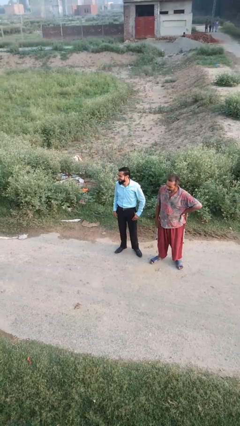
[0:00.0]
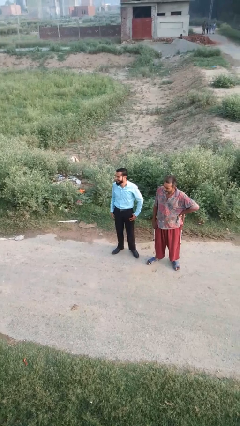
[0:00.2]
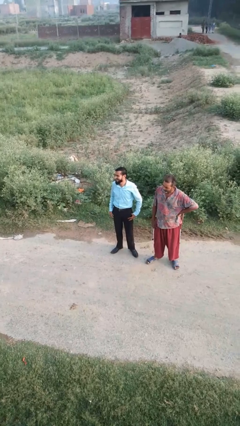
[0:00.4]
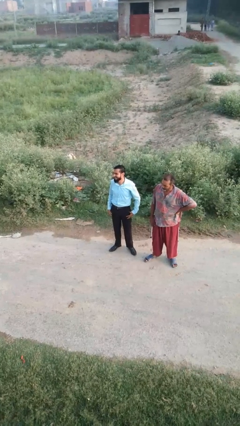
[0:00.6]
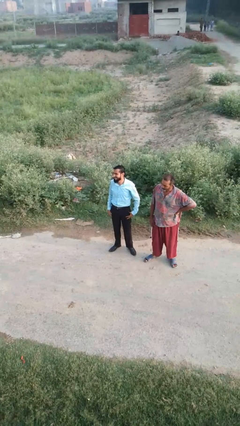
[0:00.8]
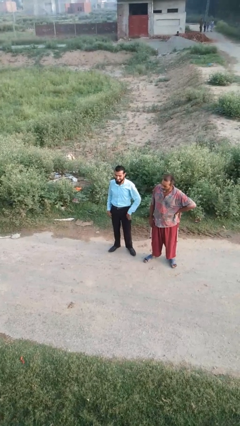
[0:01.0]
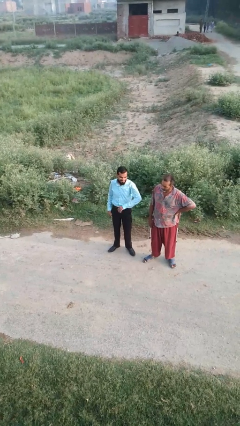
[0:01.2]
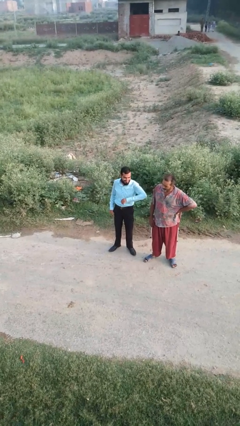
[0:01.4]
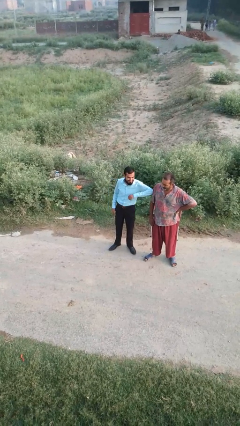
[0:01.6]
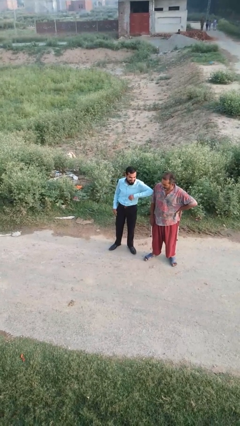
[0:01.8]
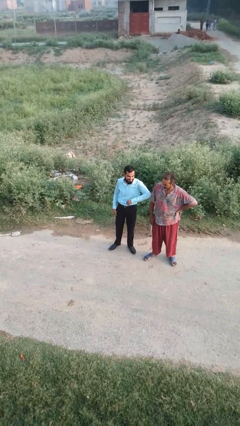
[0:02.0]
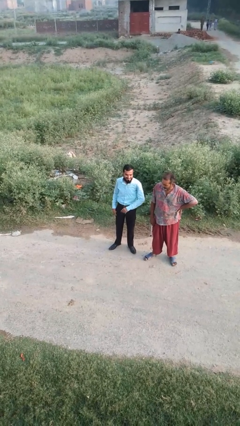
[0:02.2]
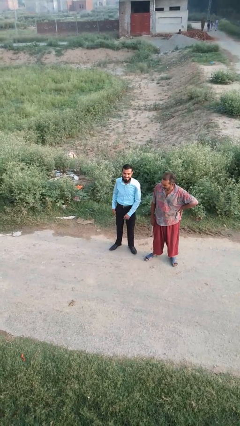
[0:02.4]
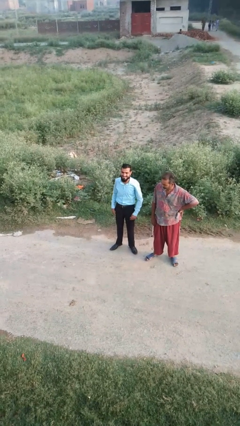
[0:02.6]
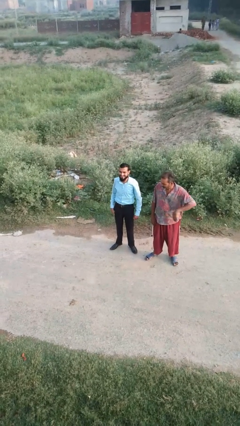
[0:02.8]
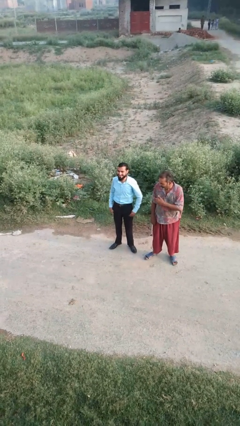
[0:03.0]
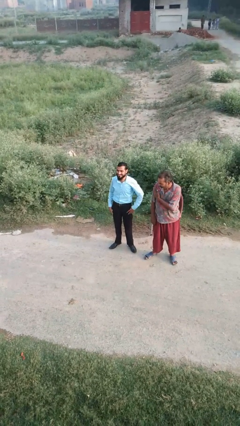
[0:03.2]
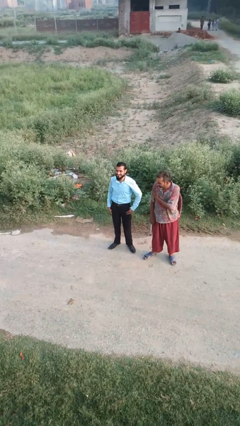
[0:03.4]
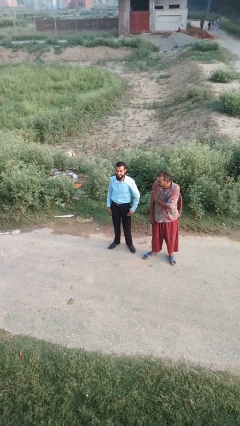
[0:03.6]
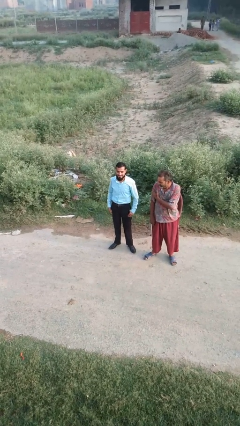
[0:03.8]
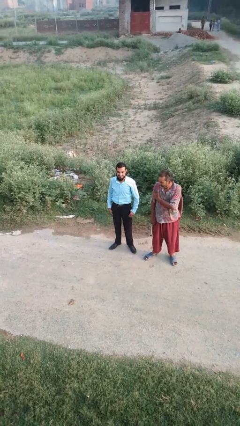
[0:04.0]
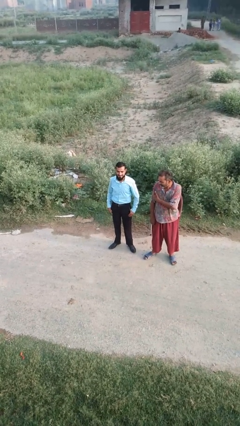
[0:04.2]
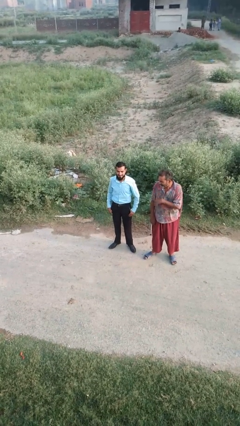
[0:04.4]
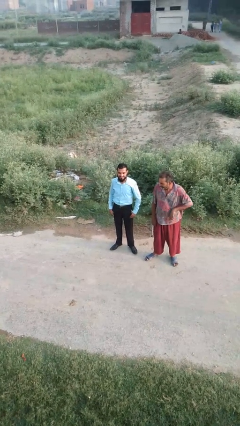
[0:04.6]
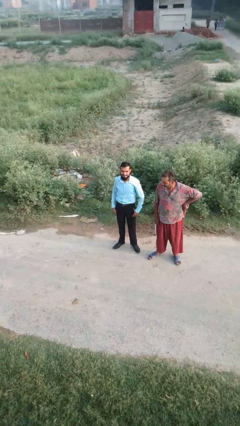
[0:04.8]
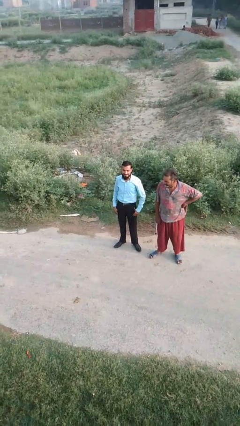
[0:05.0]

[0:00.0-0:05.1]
person nudges person with elbow

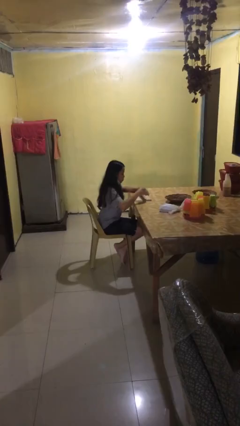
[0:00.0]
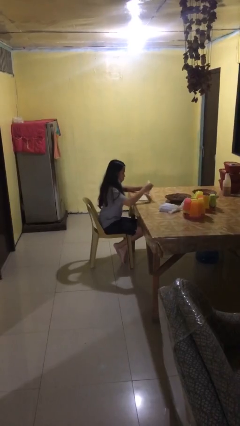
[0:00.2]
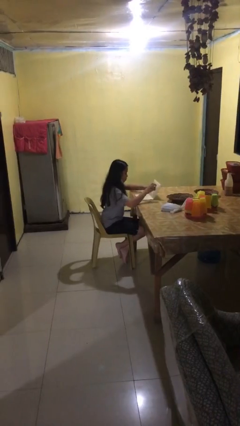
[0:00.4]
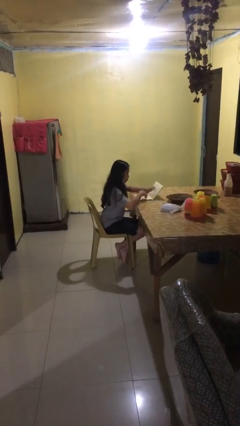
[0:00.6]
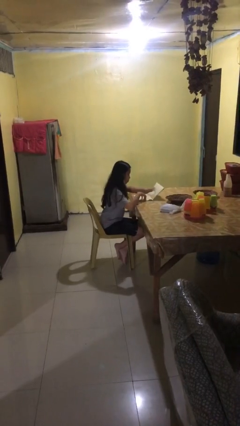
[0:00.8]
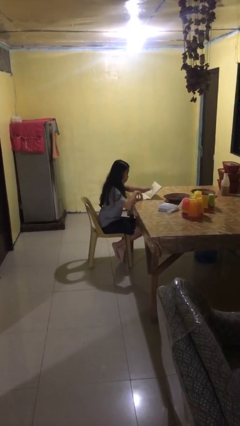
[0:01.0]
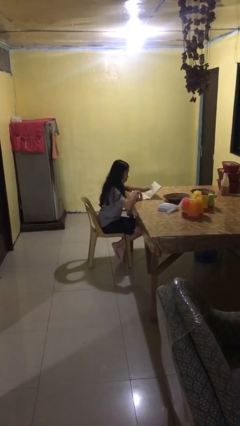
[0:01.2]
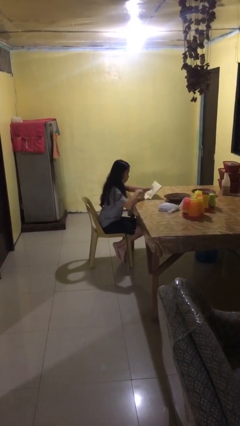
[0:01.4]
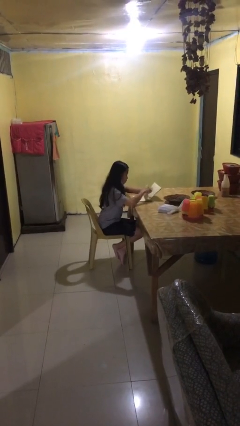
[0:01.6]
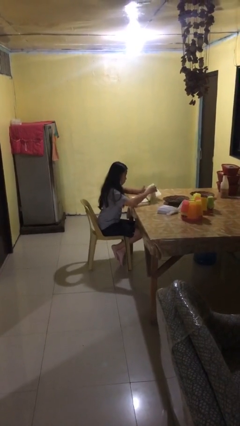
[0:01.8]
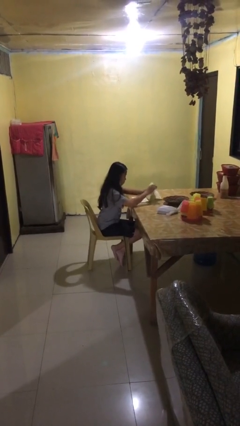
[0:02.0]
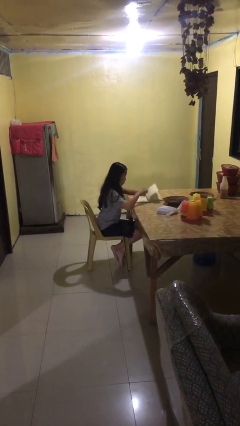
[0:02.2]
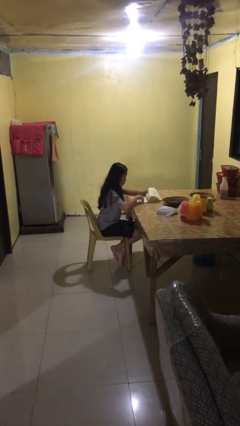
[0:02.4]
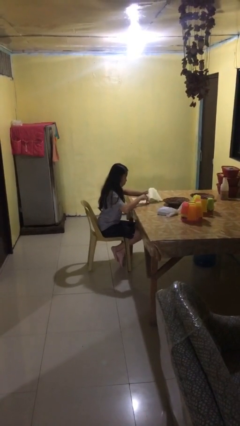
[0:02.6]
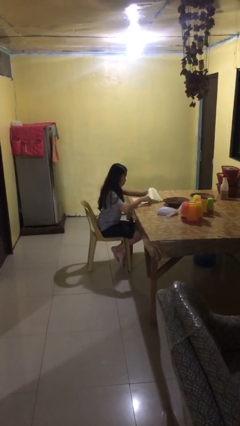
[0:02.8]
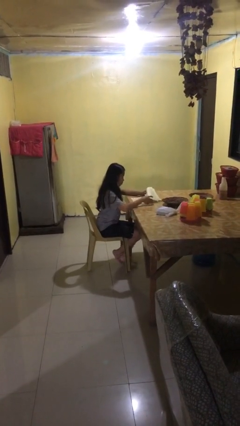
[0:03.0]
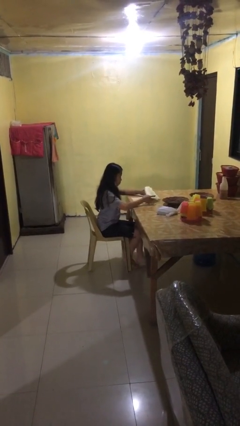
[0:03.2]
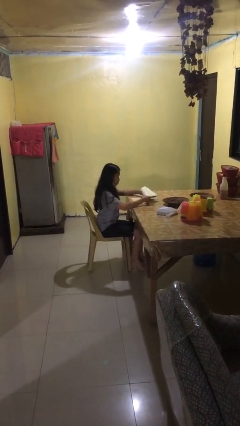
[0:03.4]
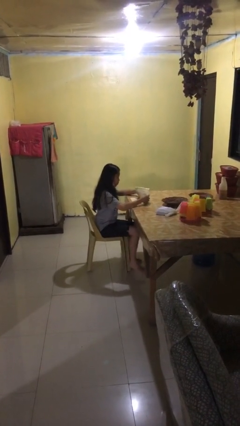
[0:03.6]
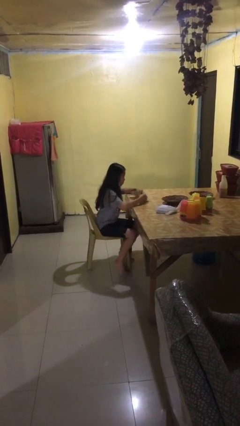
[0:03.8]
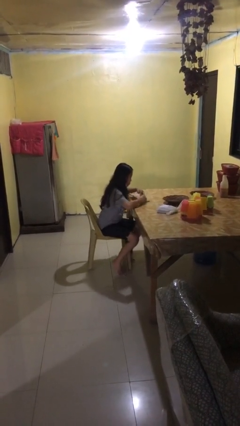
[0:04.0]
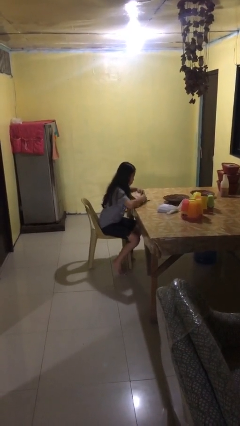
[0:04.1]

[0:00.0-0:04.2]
person reads document

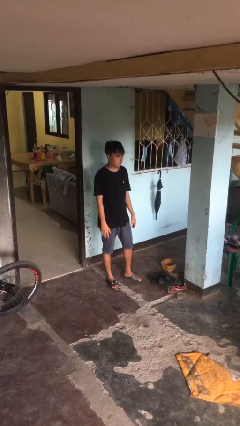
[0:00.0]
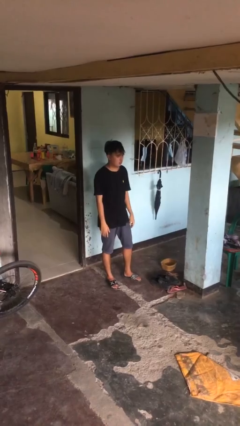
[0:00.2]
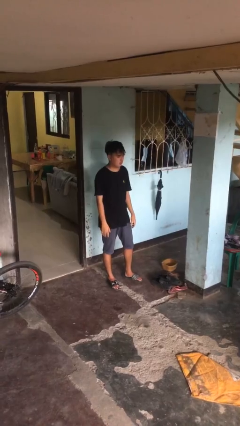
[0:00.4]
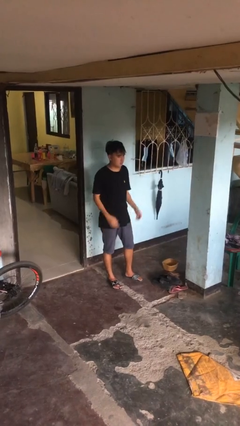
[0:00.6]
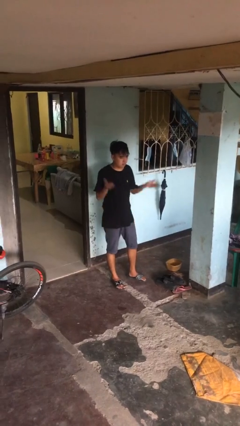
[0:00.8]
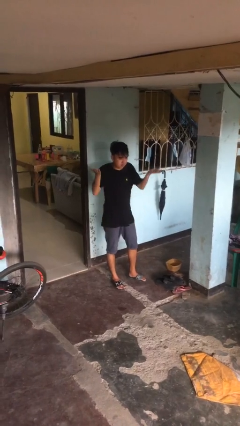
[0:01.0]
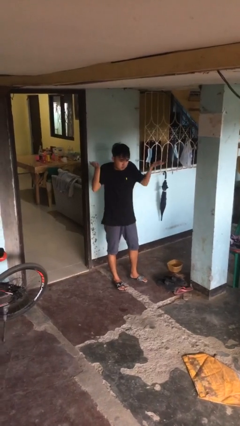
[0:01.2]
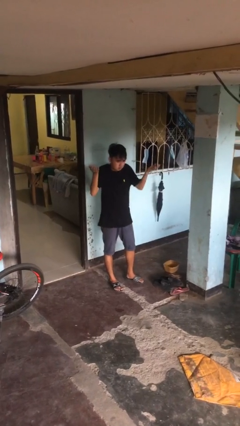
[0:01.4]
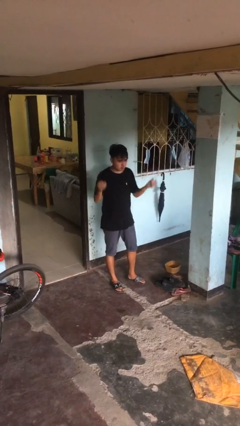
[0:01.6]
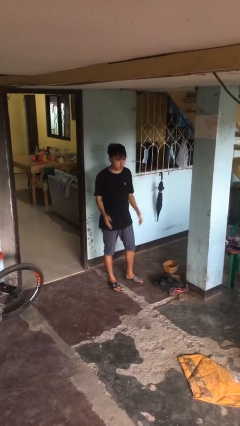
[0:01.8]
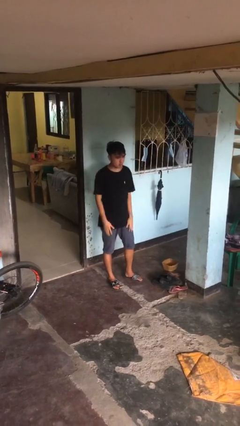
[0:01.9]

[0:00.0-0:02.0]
person shrugs

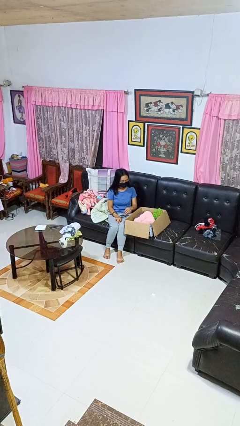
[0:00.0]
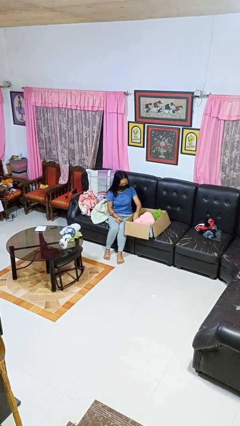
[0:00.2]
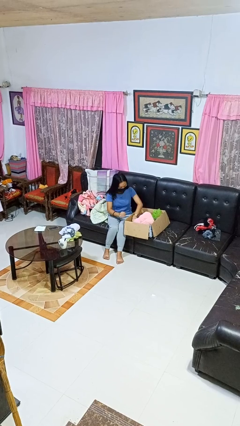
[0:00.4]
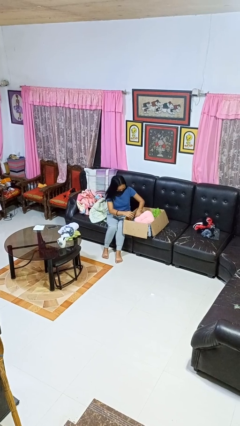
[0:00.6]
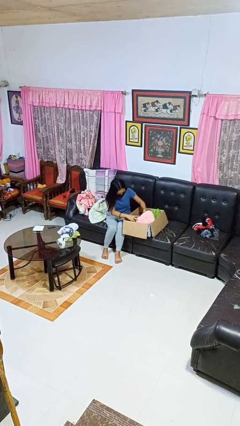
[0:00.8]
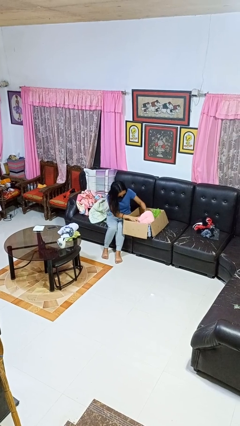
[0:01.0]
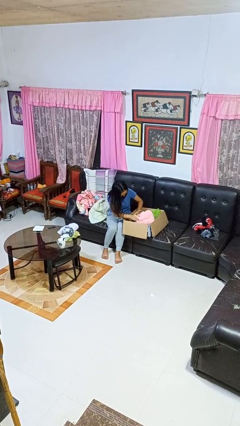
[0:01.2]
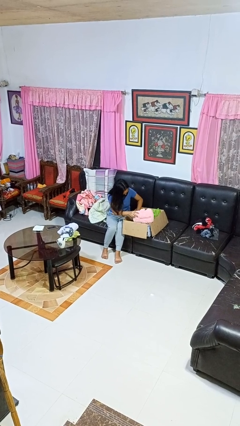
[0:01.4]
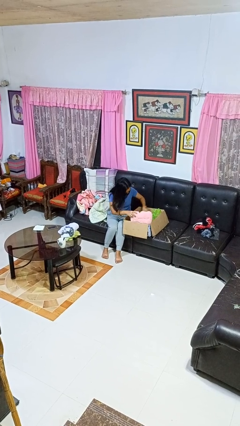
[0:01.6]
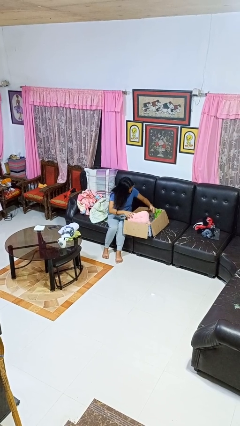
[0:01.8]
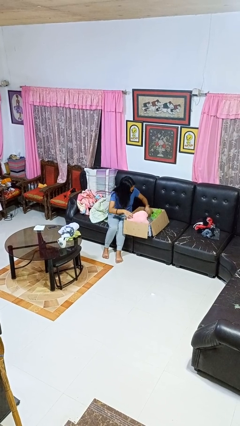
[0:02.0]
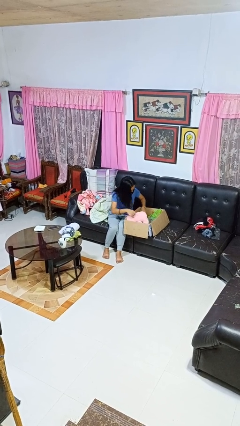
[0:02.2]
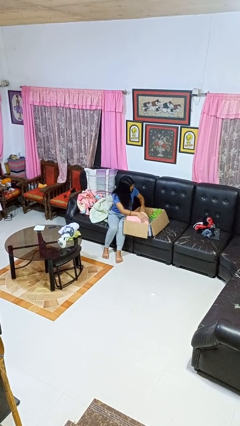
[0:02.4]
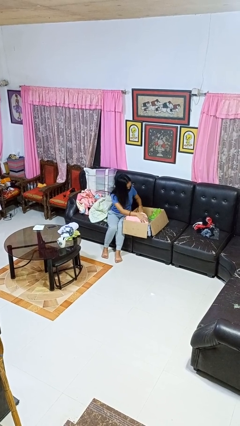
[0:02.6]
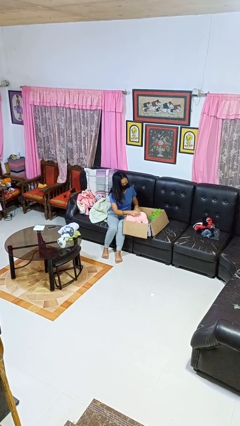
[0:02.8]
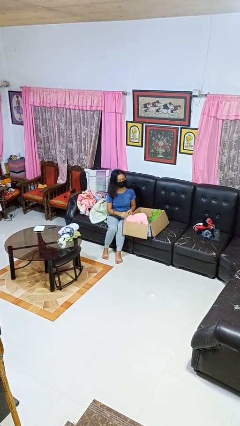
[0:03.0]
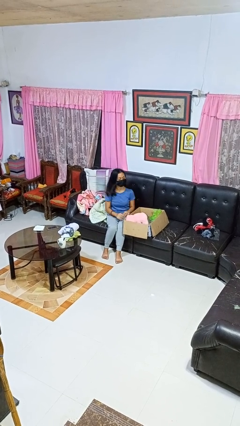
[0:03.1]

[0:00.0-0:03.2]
person searches in box

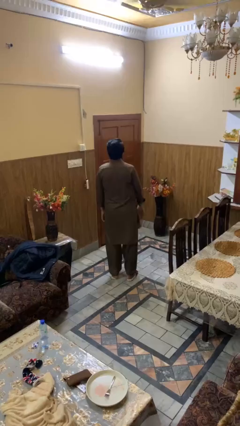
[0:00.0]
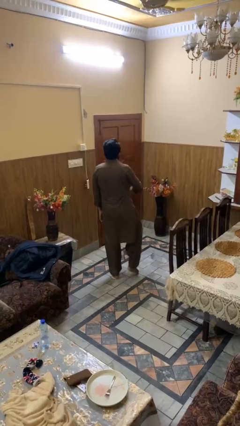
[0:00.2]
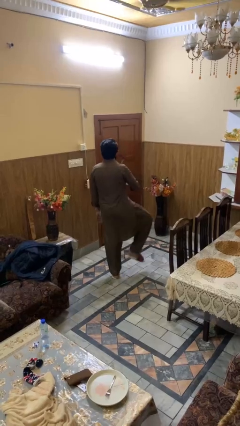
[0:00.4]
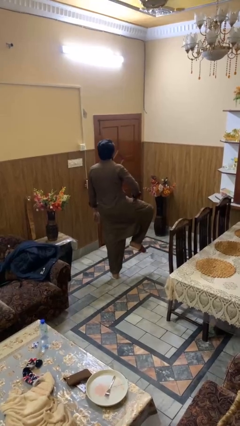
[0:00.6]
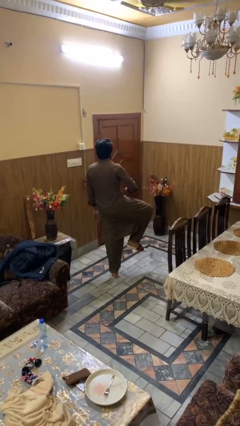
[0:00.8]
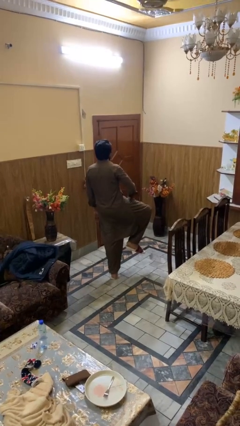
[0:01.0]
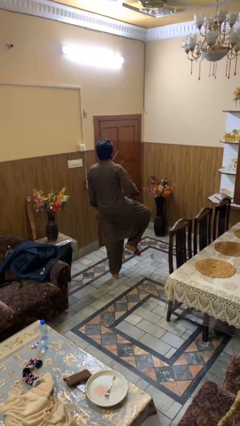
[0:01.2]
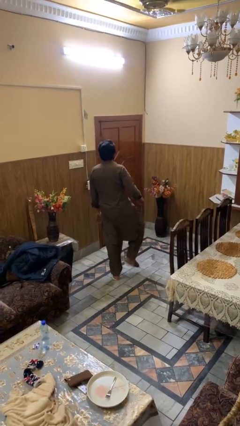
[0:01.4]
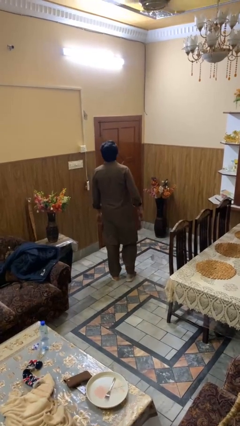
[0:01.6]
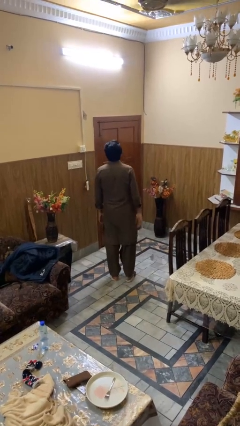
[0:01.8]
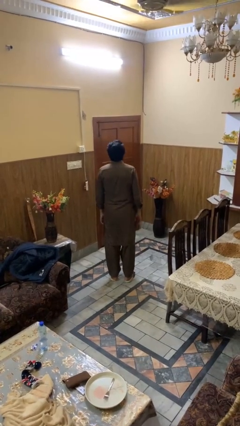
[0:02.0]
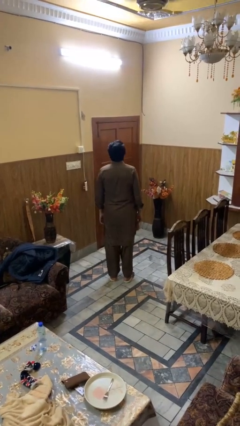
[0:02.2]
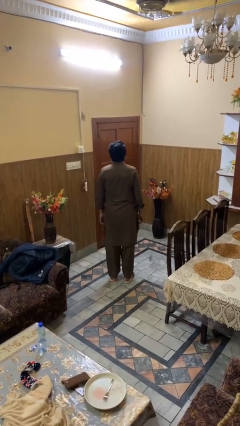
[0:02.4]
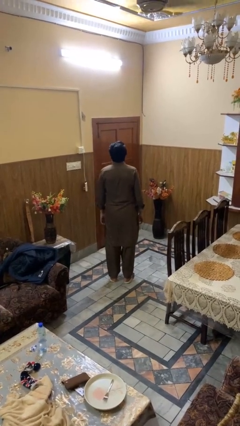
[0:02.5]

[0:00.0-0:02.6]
person slaps hands on thighs

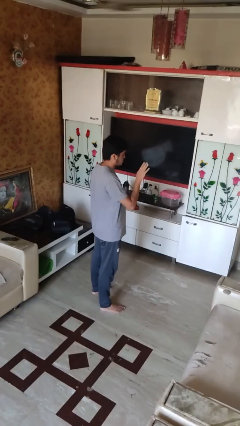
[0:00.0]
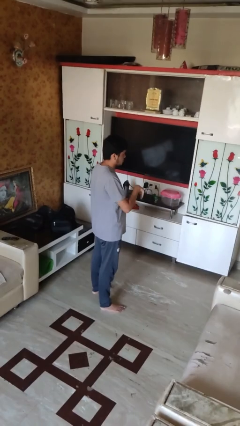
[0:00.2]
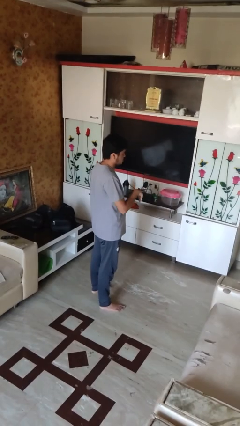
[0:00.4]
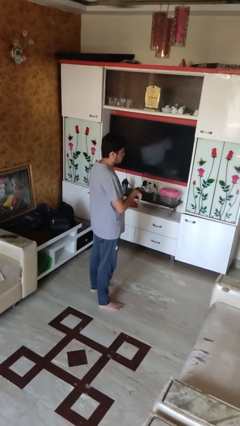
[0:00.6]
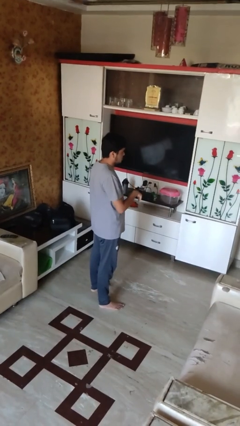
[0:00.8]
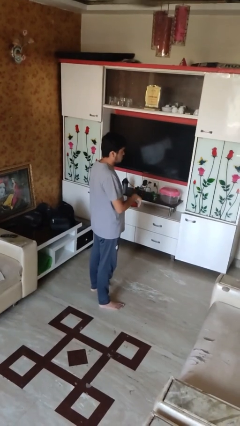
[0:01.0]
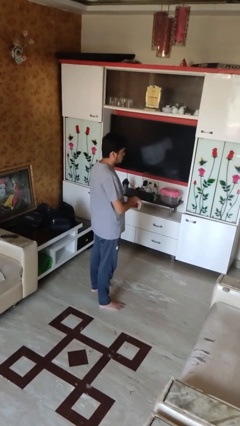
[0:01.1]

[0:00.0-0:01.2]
person gestures swipe down
